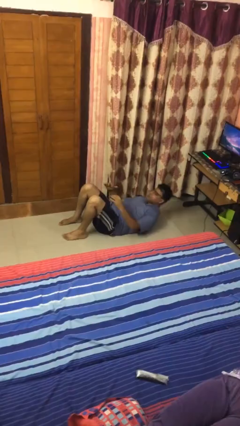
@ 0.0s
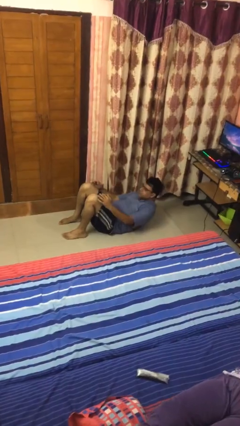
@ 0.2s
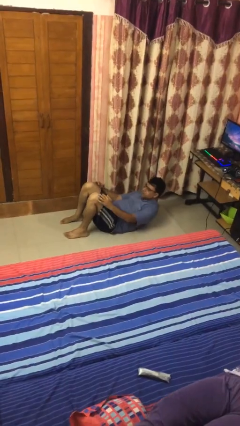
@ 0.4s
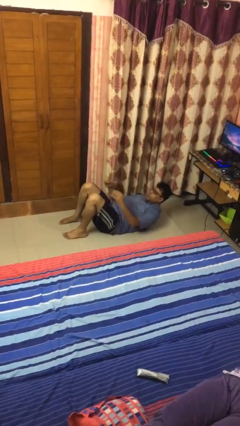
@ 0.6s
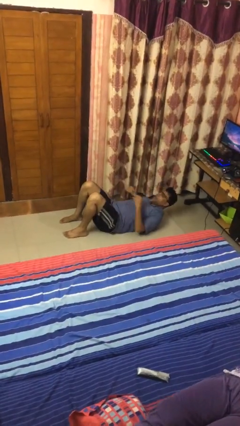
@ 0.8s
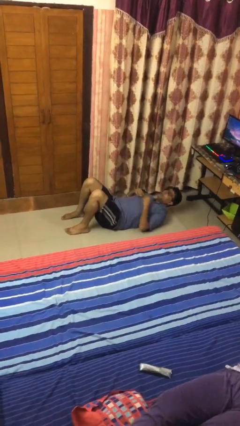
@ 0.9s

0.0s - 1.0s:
person exercises with situp

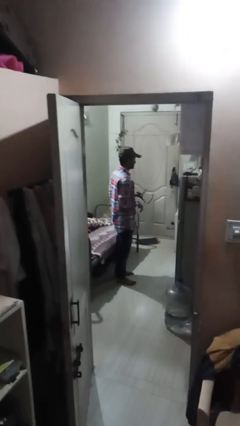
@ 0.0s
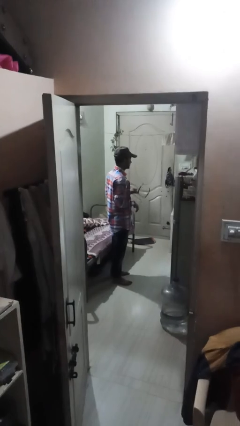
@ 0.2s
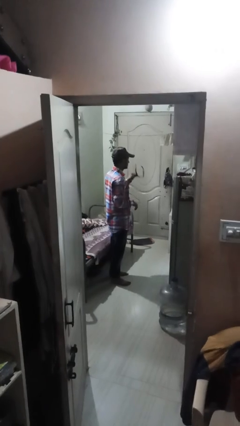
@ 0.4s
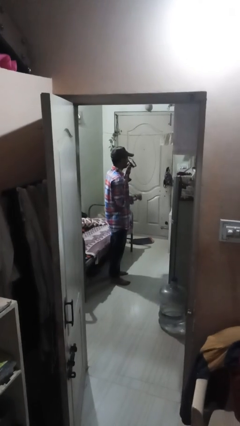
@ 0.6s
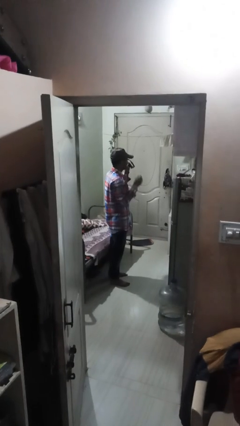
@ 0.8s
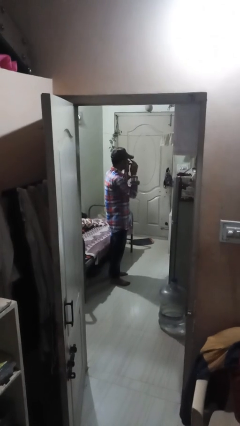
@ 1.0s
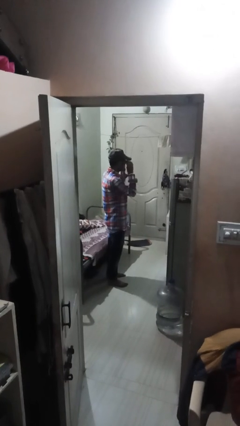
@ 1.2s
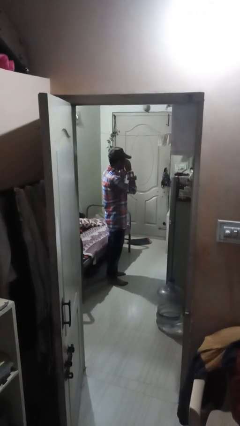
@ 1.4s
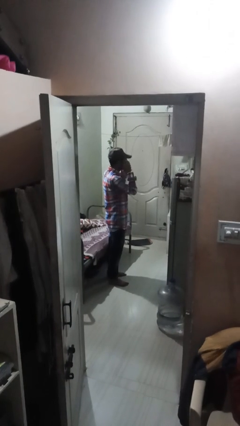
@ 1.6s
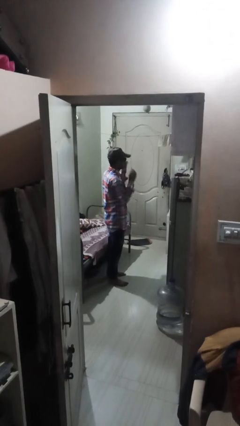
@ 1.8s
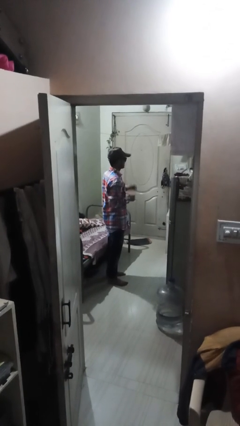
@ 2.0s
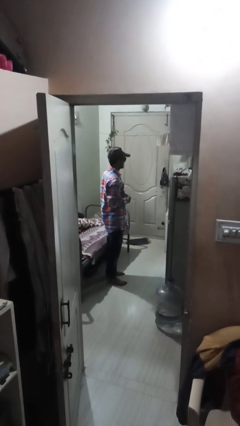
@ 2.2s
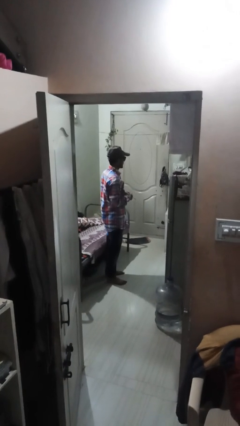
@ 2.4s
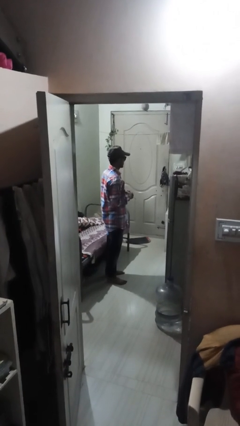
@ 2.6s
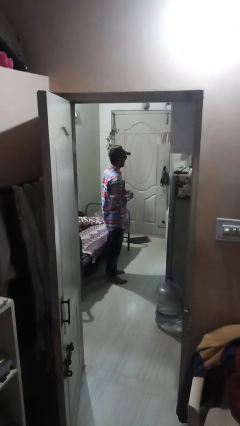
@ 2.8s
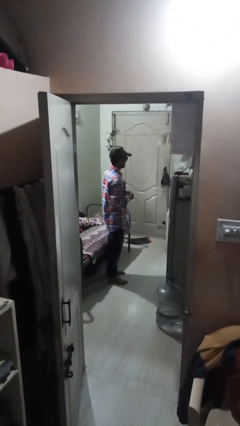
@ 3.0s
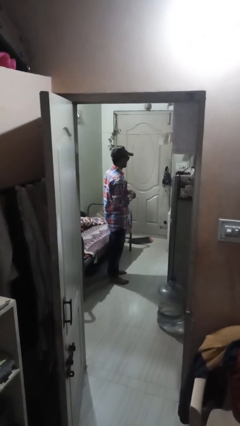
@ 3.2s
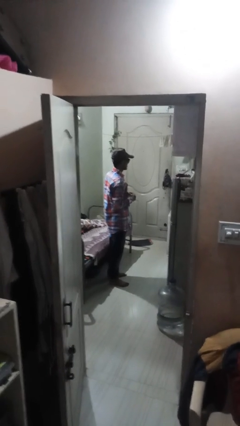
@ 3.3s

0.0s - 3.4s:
person puts on sunglasses

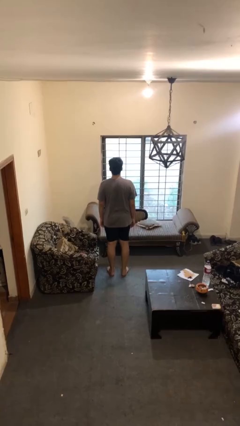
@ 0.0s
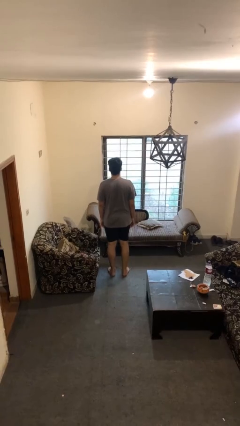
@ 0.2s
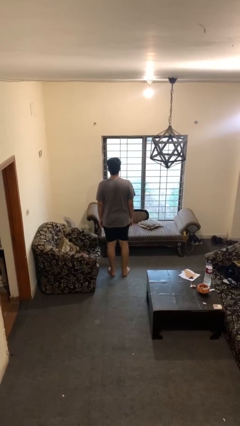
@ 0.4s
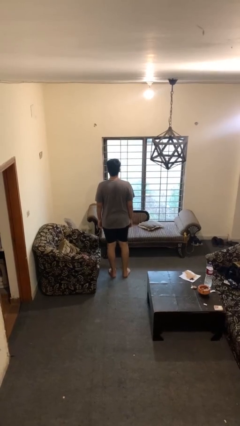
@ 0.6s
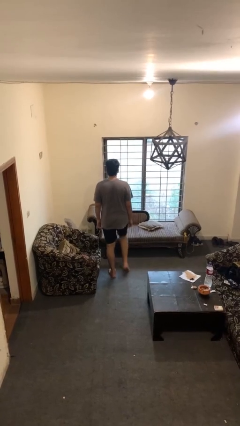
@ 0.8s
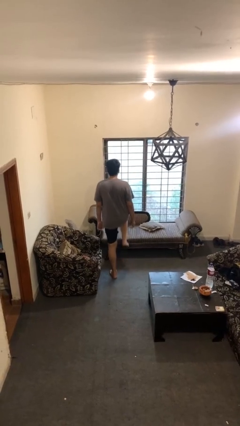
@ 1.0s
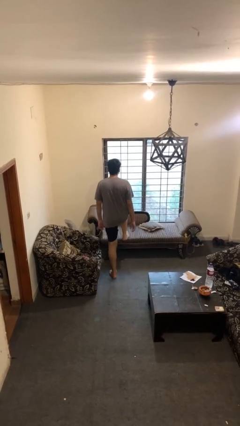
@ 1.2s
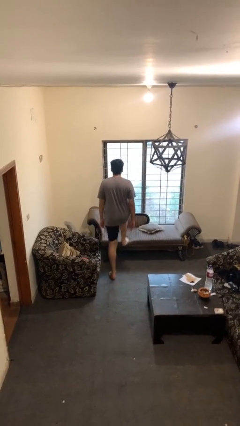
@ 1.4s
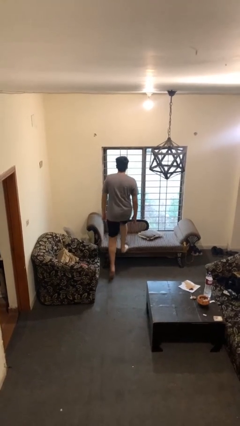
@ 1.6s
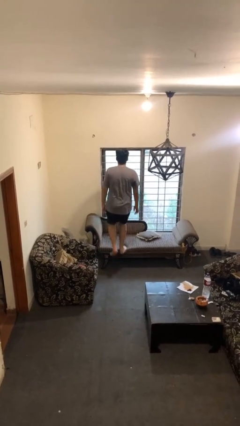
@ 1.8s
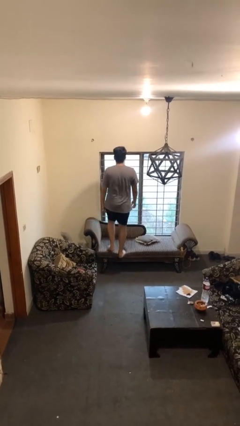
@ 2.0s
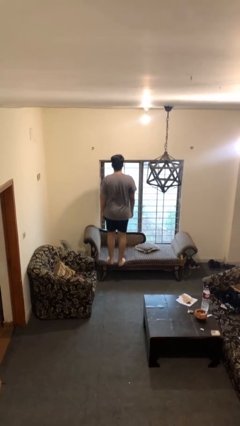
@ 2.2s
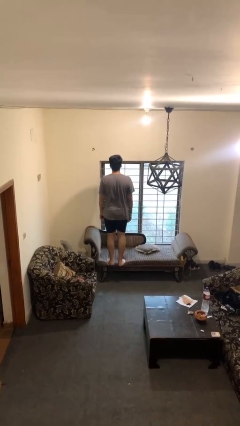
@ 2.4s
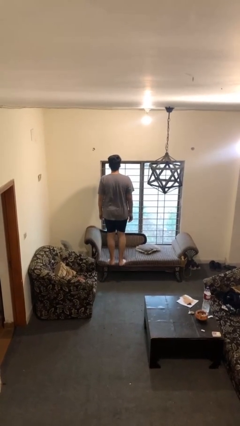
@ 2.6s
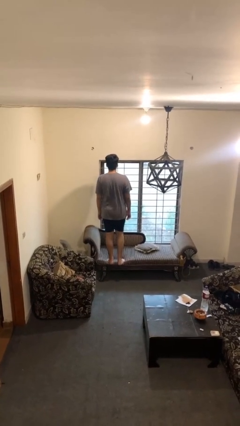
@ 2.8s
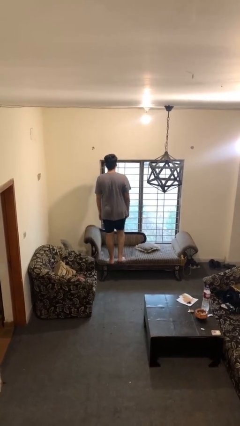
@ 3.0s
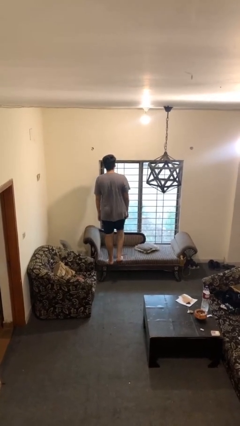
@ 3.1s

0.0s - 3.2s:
person climbs on couch

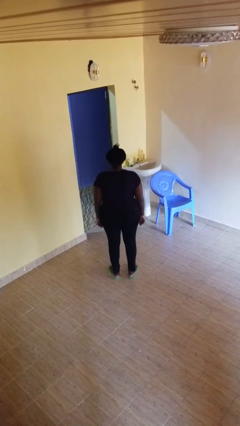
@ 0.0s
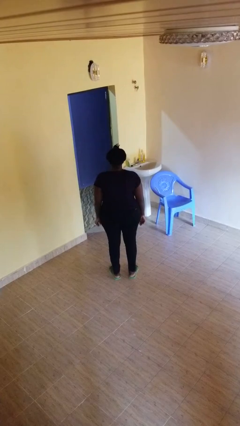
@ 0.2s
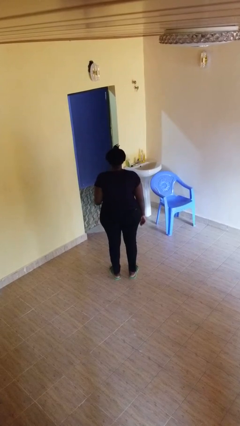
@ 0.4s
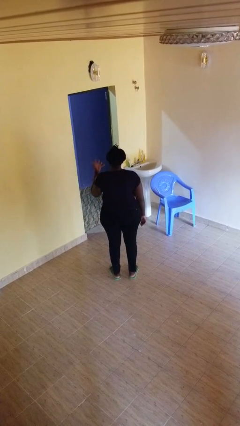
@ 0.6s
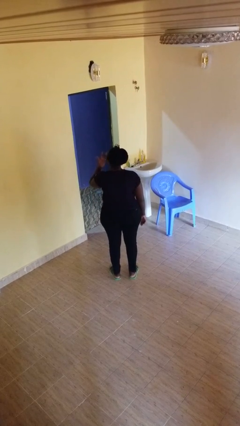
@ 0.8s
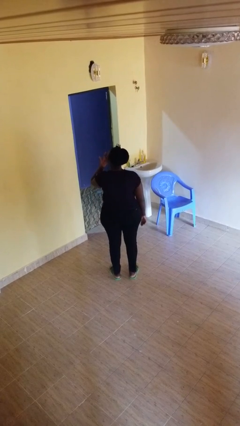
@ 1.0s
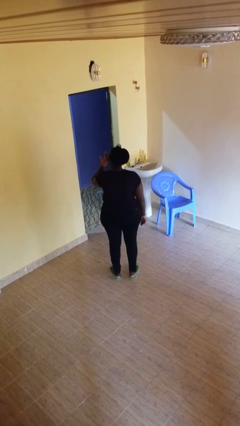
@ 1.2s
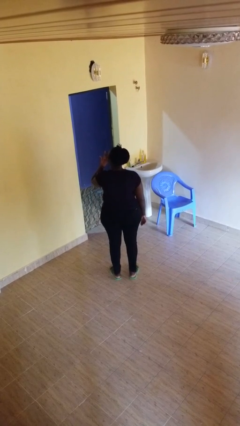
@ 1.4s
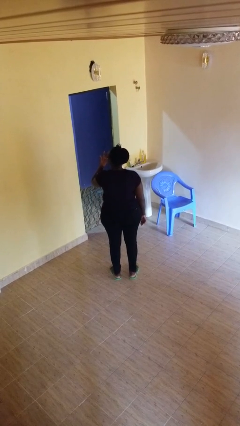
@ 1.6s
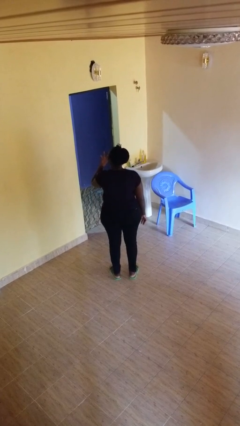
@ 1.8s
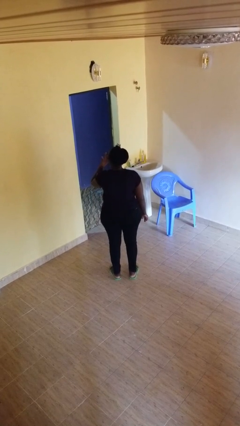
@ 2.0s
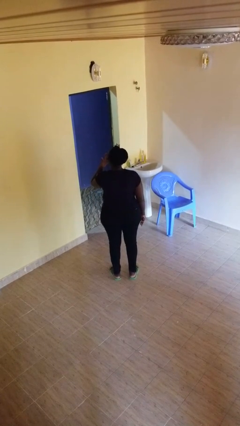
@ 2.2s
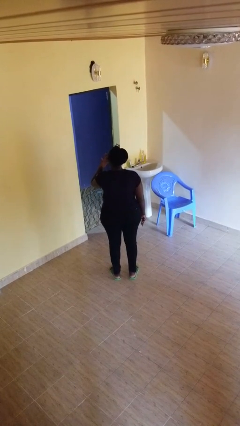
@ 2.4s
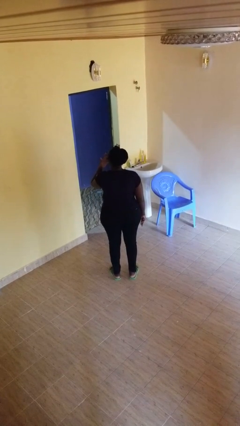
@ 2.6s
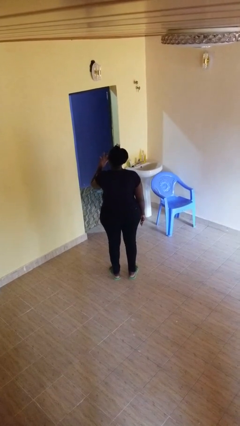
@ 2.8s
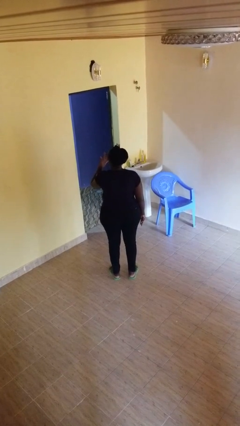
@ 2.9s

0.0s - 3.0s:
person licks fingers

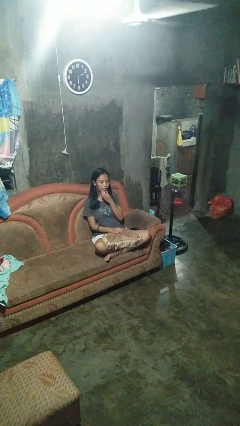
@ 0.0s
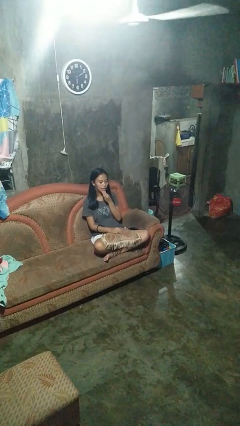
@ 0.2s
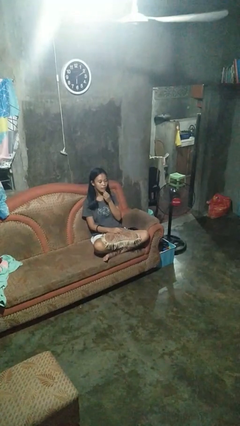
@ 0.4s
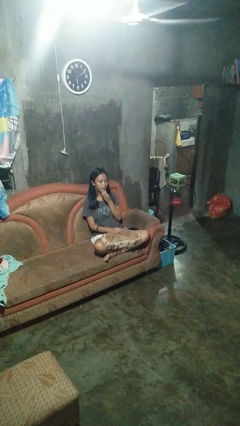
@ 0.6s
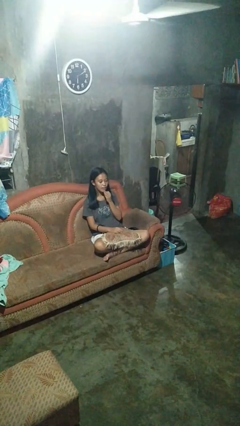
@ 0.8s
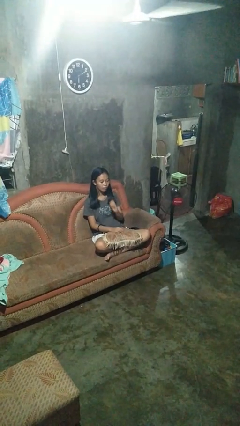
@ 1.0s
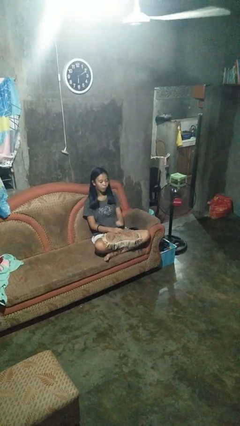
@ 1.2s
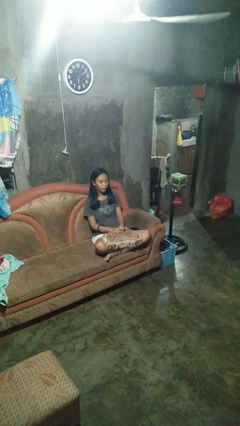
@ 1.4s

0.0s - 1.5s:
person strokes chin

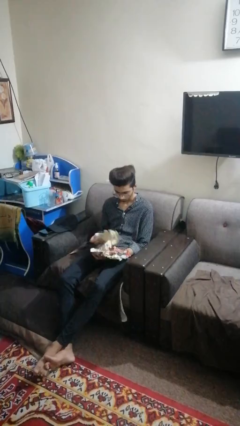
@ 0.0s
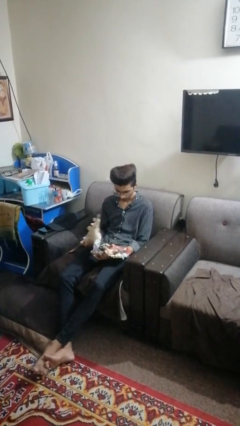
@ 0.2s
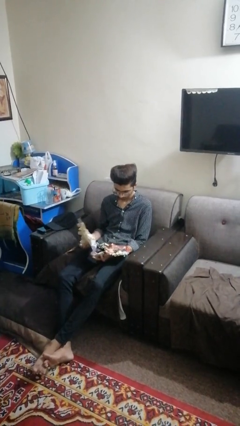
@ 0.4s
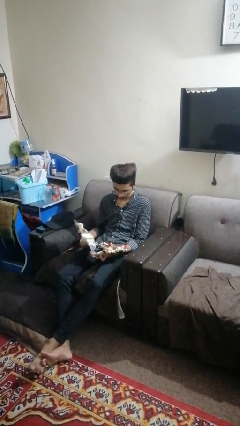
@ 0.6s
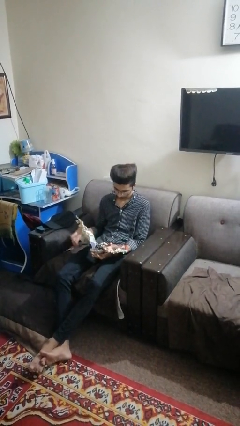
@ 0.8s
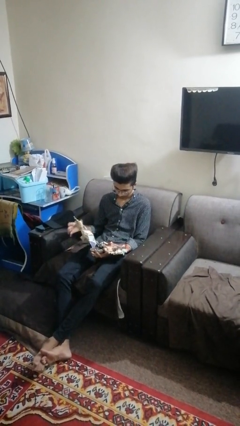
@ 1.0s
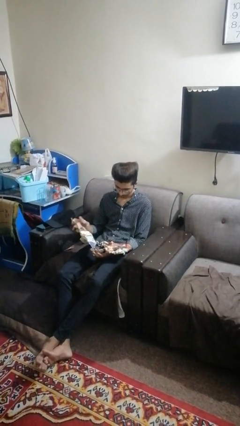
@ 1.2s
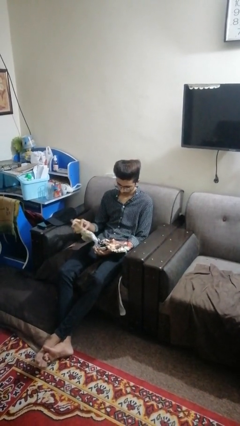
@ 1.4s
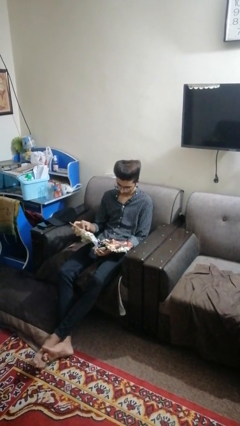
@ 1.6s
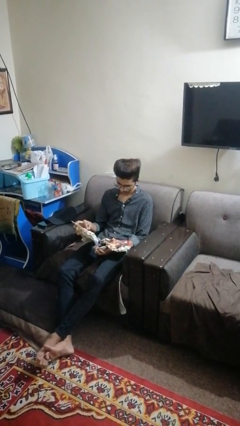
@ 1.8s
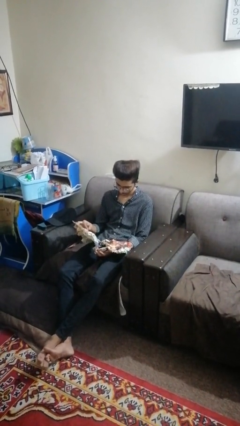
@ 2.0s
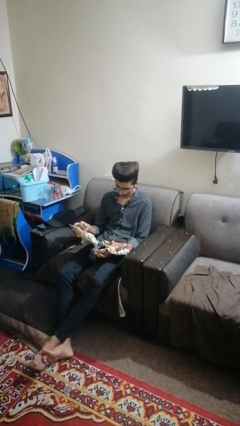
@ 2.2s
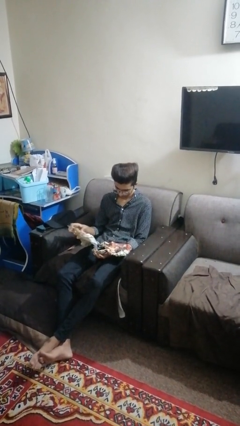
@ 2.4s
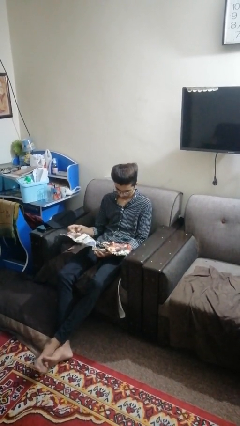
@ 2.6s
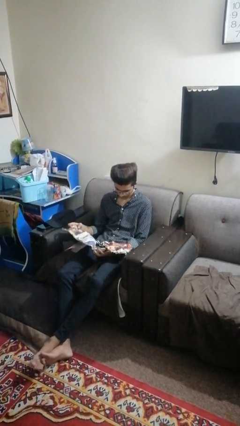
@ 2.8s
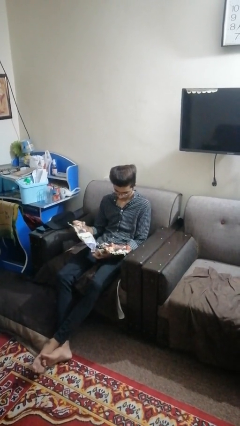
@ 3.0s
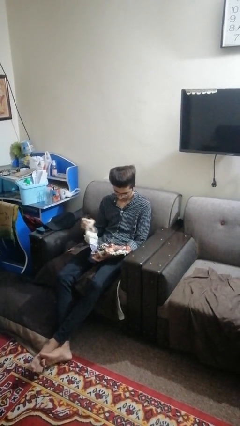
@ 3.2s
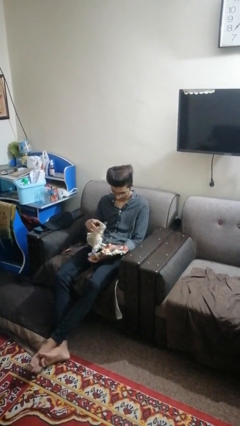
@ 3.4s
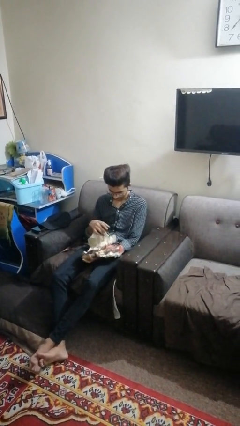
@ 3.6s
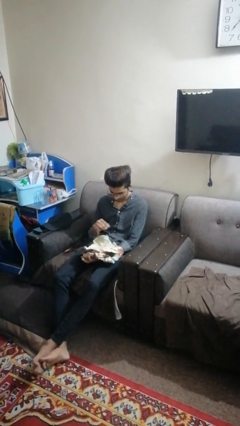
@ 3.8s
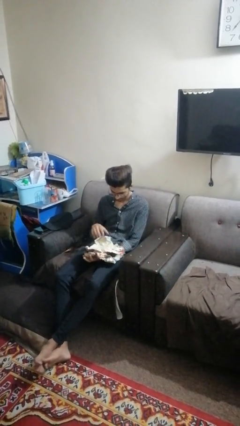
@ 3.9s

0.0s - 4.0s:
person reads newspaper

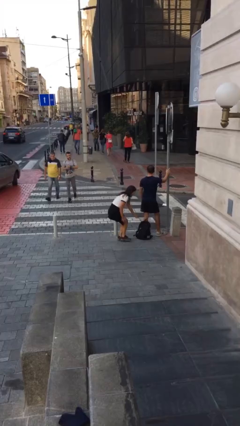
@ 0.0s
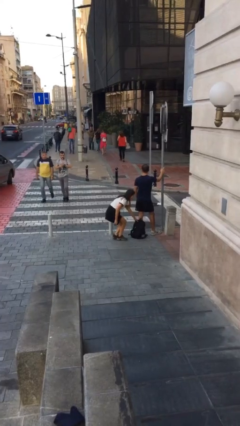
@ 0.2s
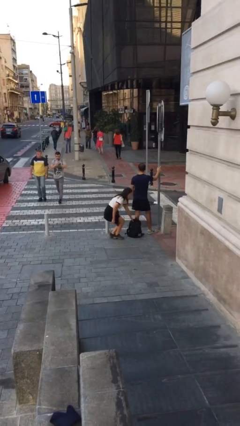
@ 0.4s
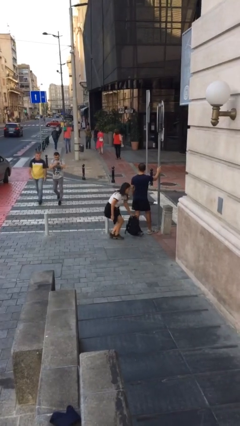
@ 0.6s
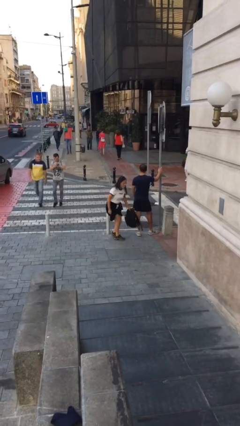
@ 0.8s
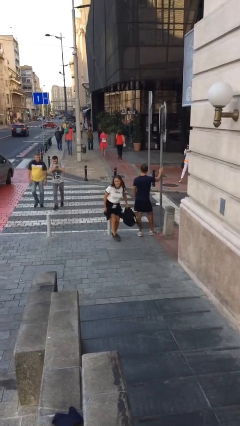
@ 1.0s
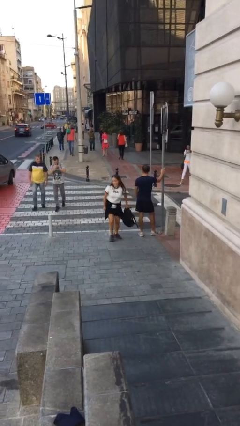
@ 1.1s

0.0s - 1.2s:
person steals object from person

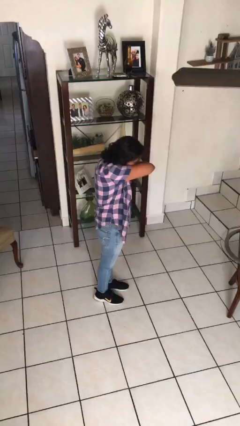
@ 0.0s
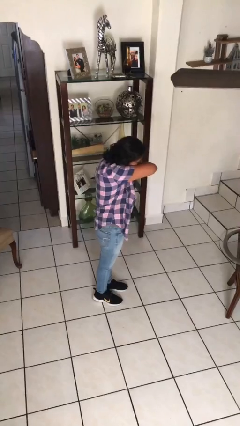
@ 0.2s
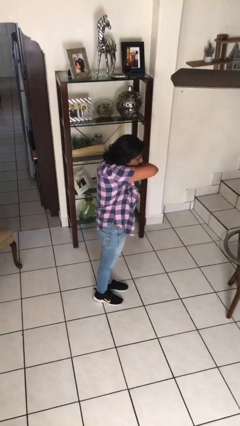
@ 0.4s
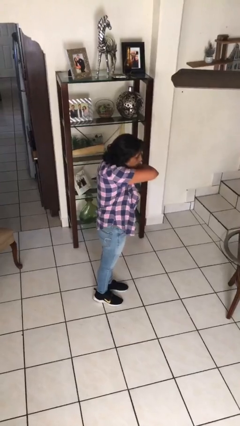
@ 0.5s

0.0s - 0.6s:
person sneezes into arm
